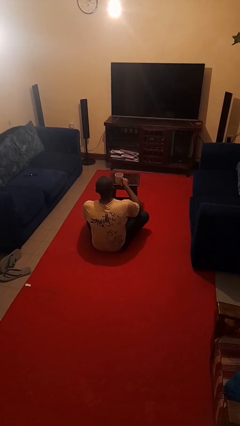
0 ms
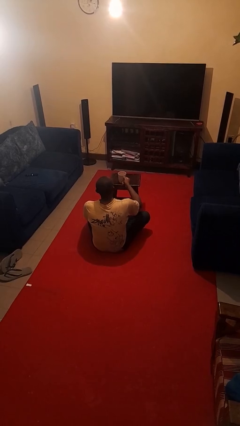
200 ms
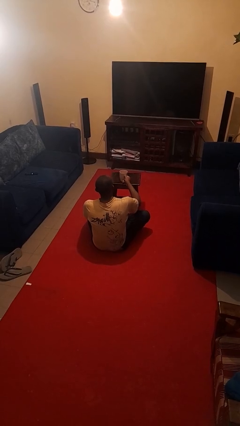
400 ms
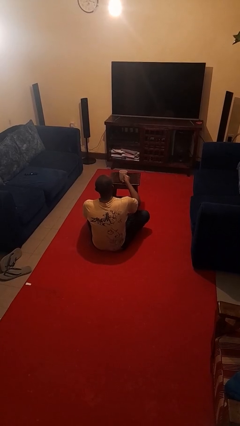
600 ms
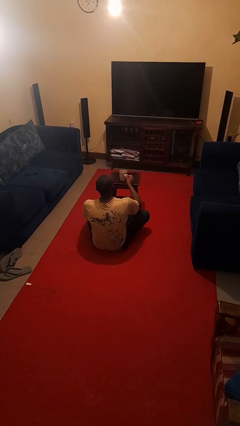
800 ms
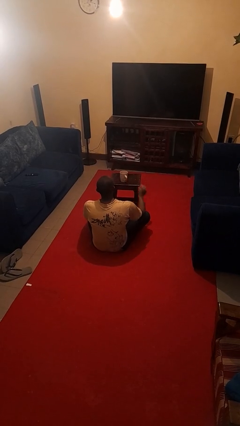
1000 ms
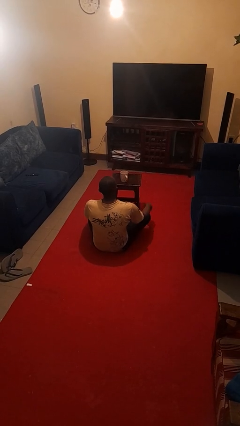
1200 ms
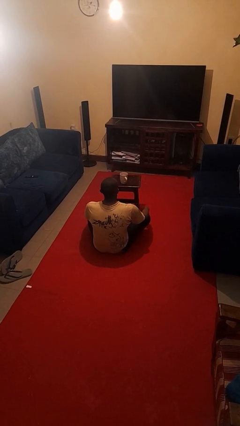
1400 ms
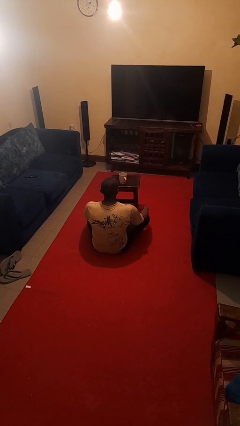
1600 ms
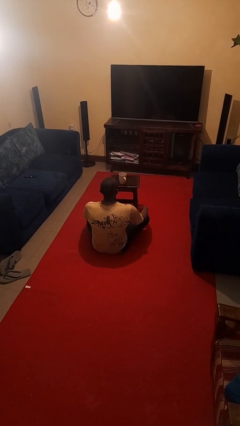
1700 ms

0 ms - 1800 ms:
person puts down object on table

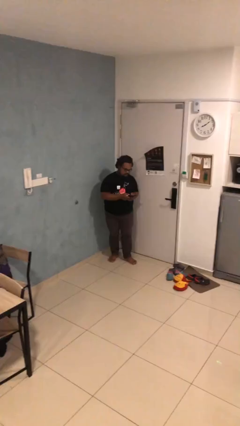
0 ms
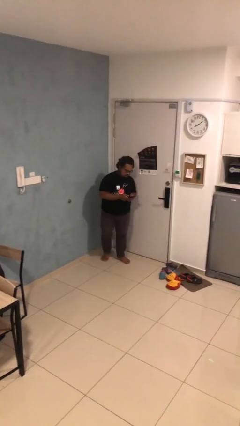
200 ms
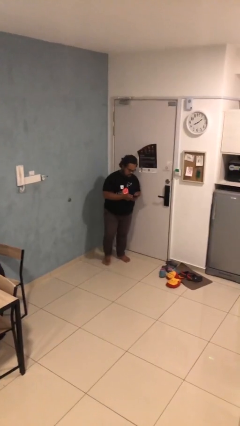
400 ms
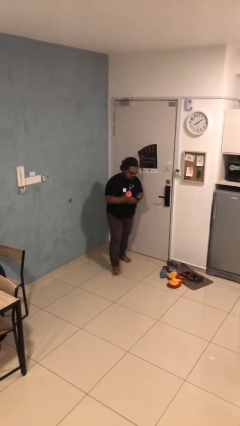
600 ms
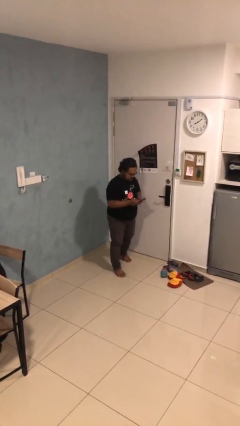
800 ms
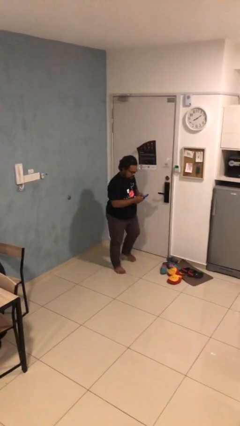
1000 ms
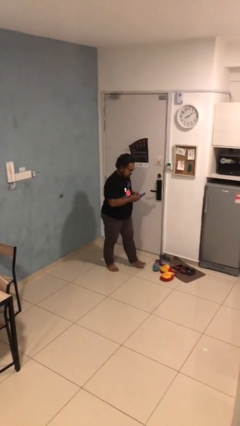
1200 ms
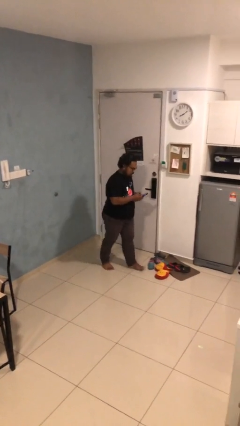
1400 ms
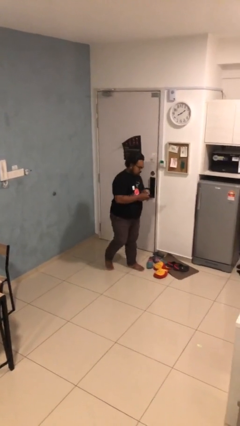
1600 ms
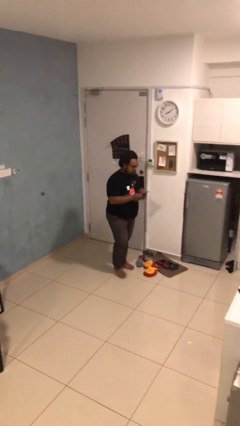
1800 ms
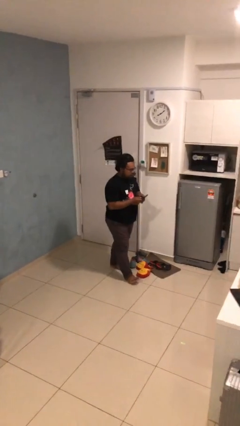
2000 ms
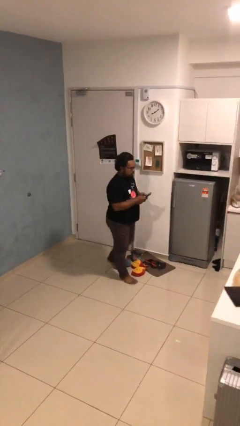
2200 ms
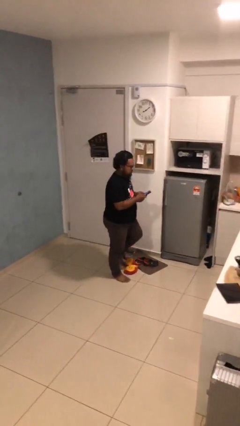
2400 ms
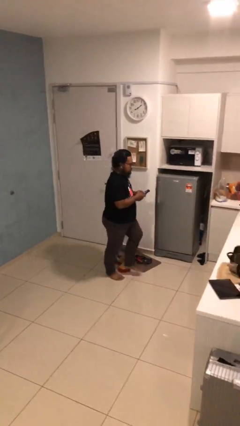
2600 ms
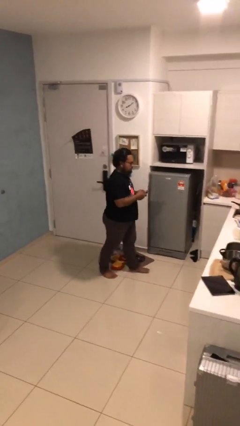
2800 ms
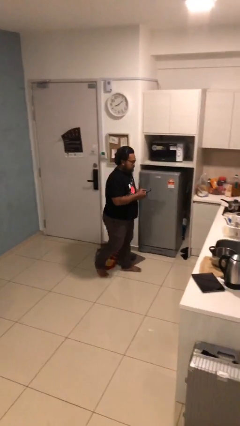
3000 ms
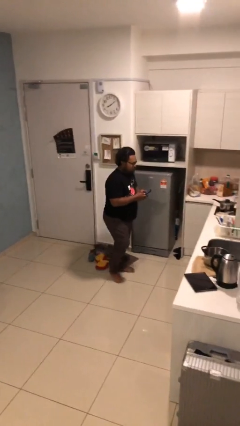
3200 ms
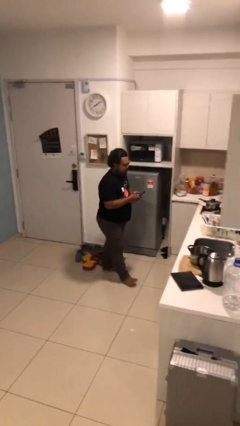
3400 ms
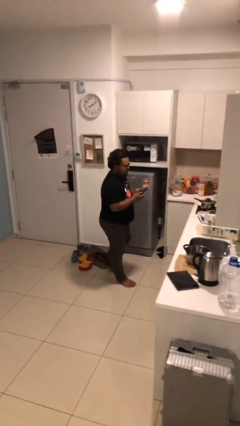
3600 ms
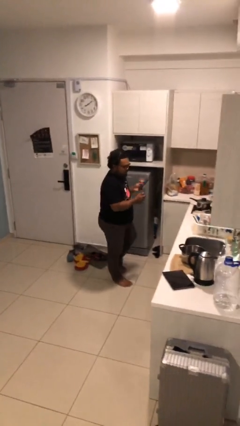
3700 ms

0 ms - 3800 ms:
person texts on phone

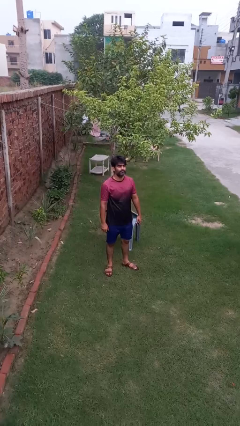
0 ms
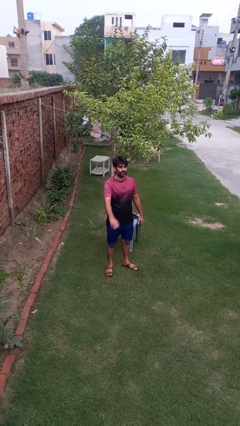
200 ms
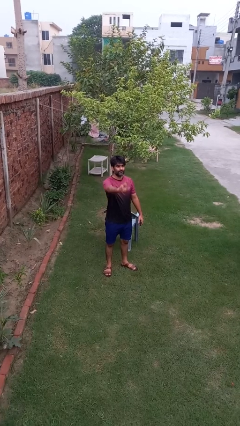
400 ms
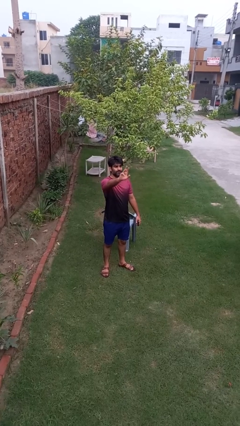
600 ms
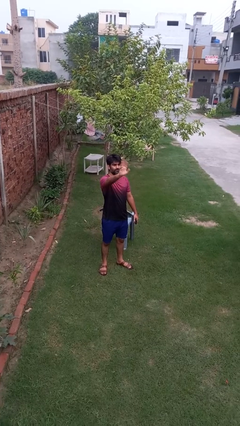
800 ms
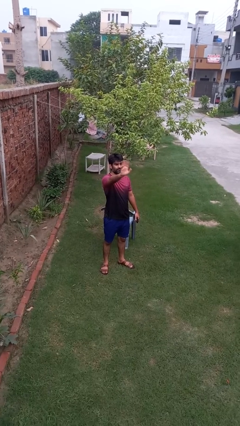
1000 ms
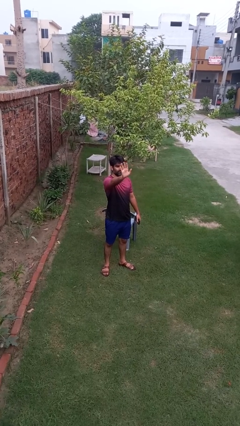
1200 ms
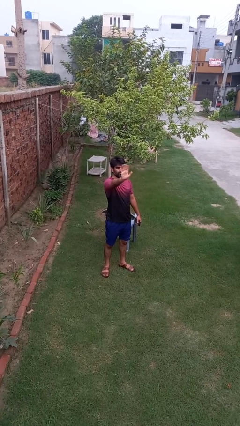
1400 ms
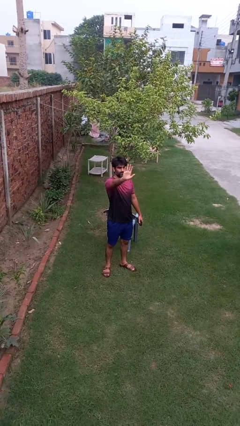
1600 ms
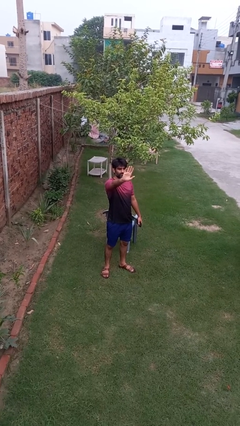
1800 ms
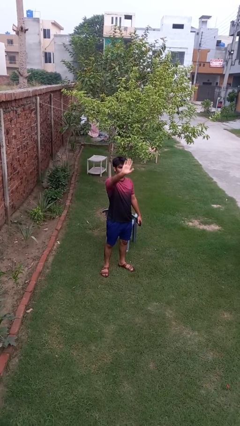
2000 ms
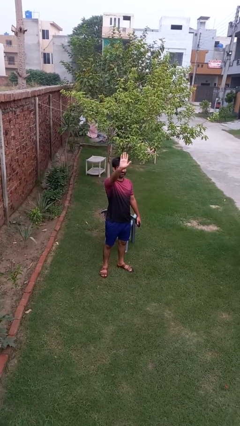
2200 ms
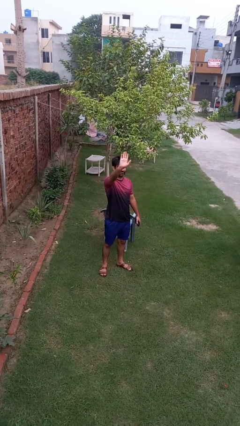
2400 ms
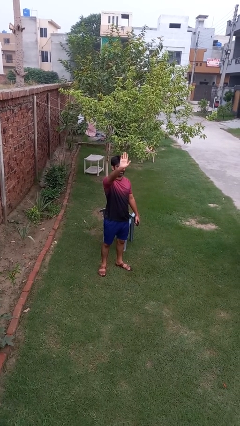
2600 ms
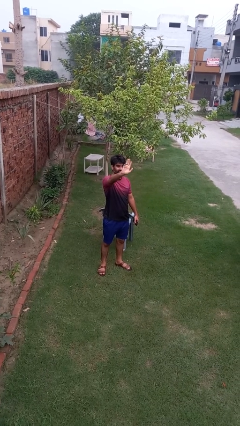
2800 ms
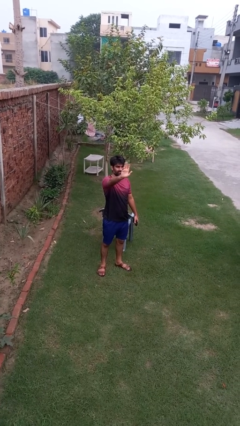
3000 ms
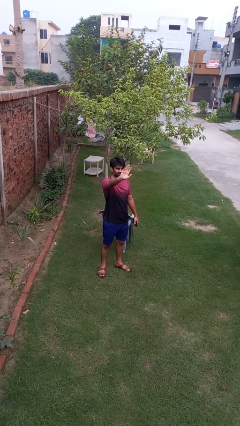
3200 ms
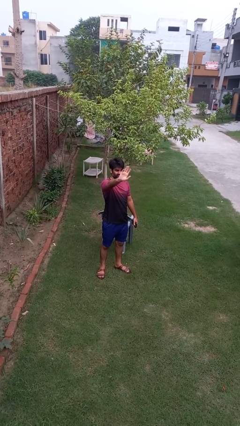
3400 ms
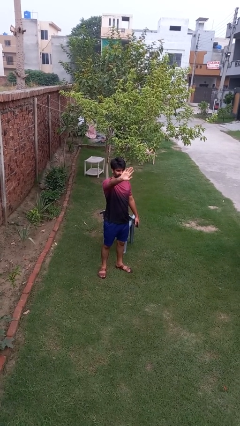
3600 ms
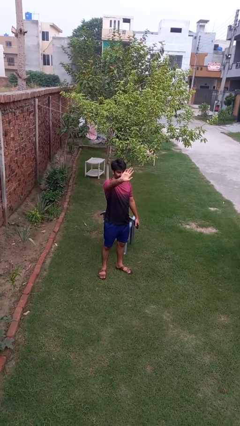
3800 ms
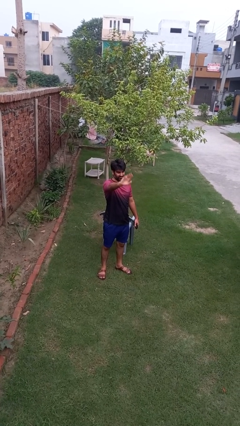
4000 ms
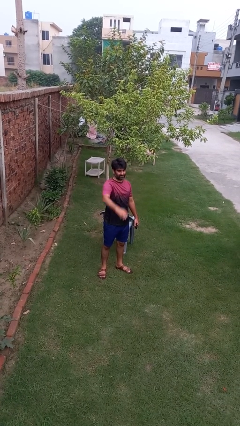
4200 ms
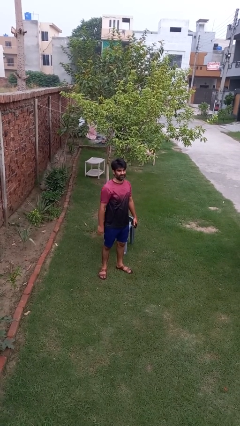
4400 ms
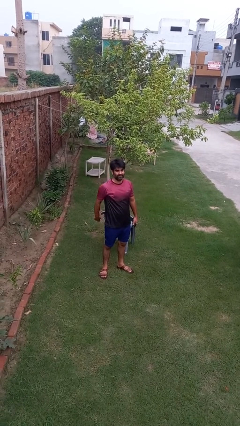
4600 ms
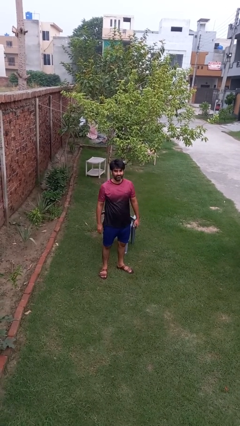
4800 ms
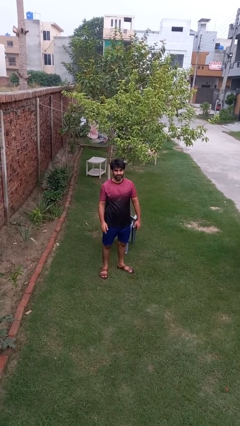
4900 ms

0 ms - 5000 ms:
person waves at person

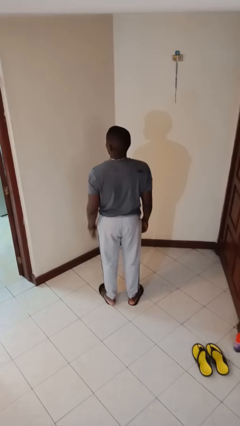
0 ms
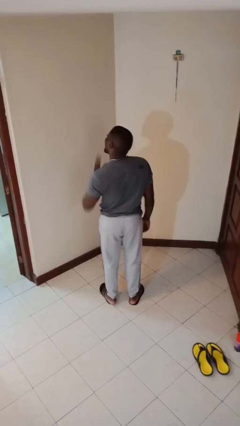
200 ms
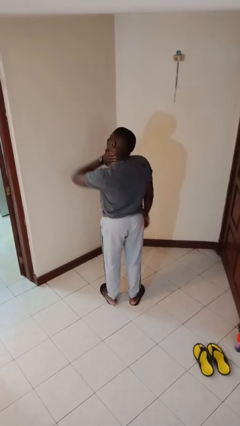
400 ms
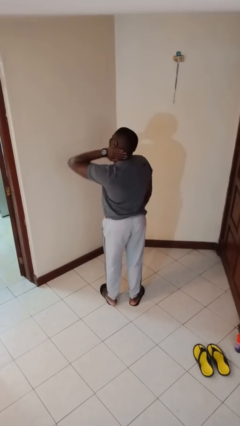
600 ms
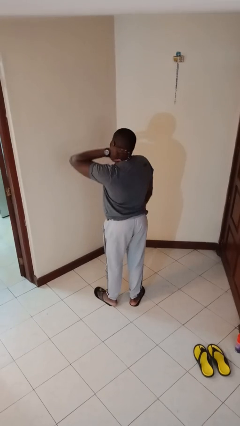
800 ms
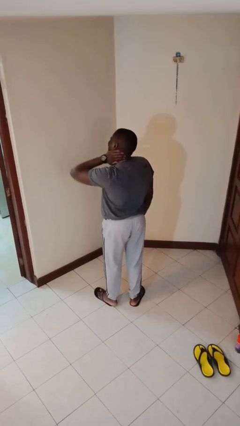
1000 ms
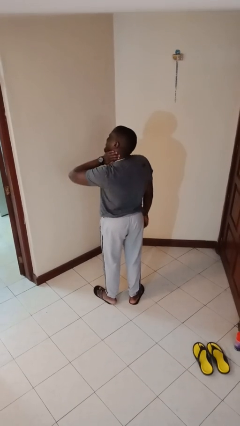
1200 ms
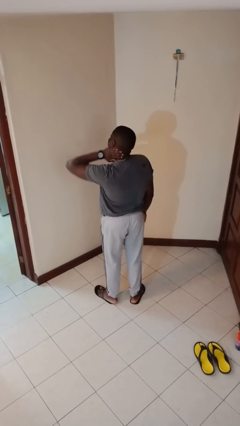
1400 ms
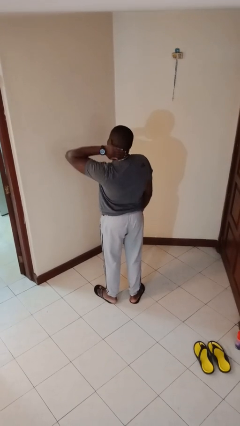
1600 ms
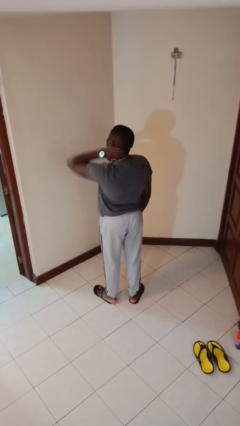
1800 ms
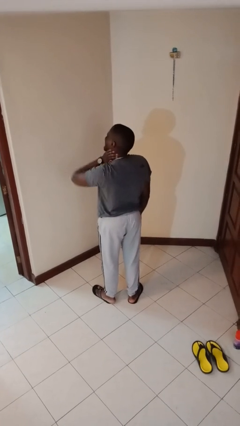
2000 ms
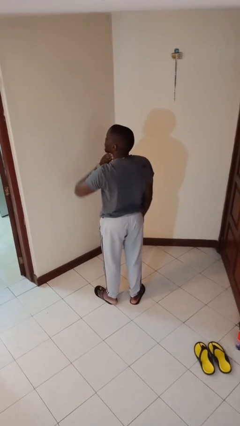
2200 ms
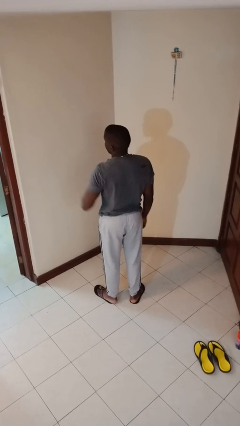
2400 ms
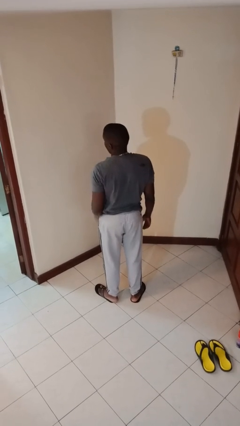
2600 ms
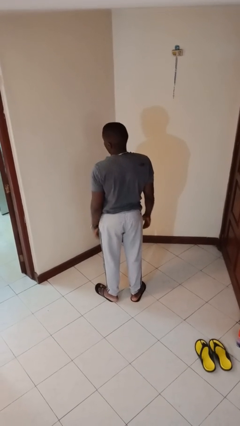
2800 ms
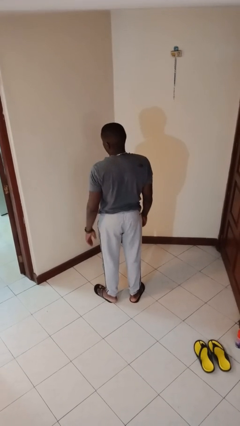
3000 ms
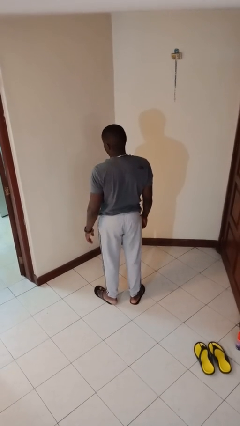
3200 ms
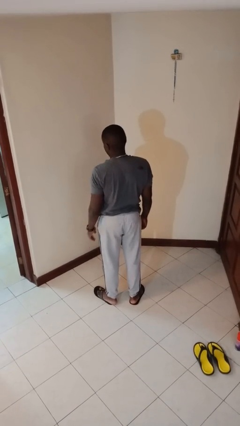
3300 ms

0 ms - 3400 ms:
person rubs neck

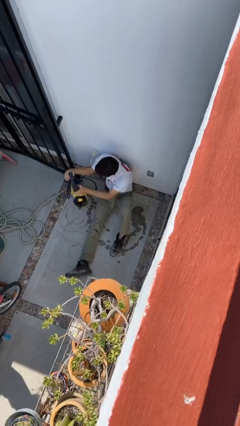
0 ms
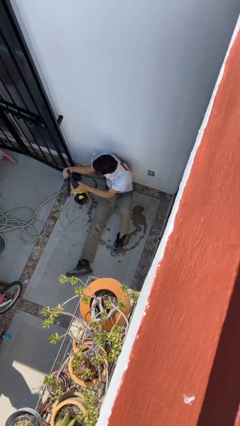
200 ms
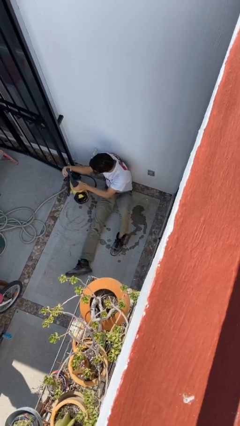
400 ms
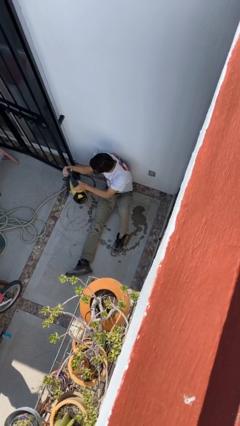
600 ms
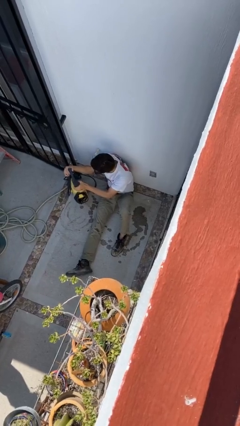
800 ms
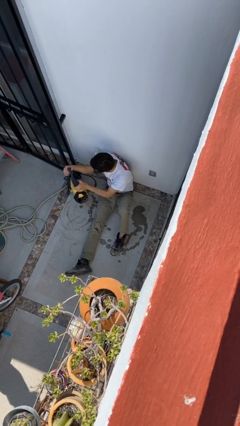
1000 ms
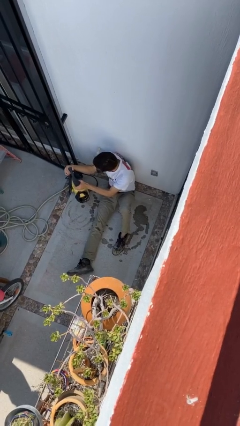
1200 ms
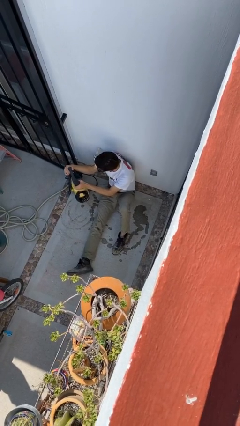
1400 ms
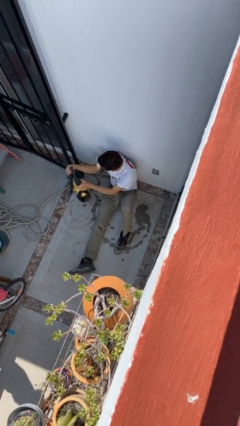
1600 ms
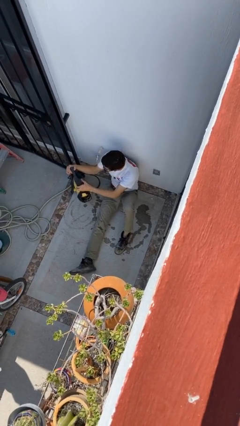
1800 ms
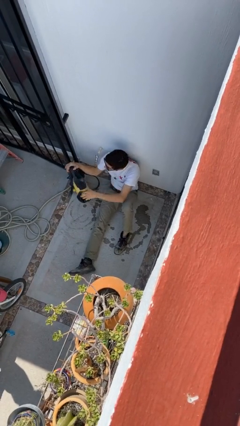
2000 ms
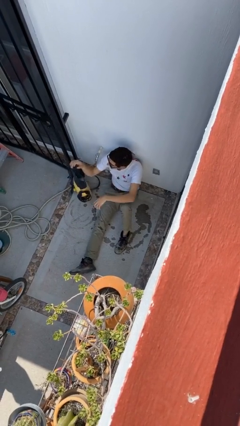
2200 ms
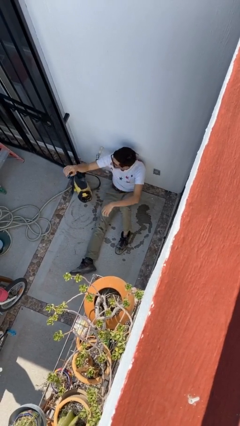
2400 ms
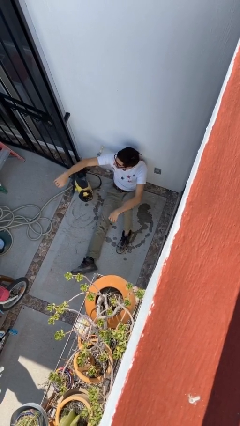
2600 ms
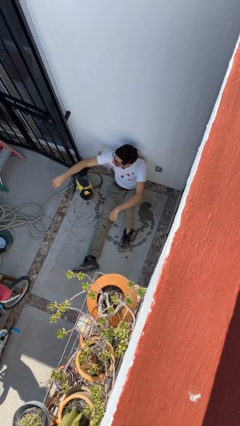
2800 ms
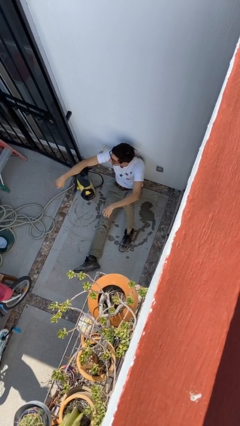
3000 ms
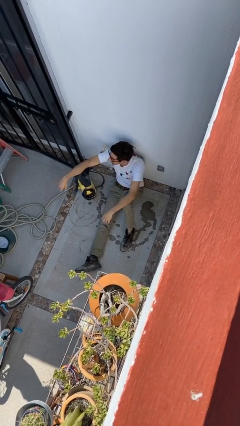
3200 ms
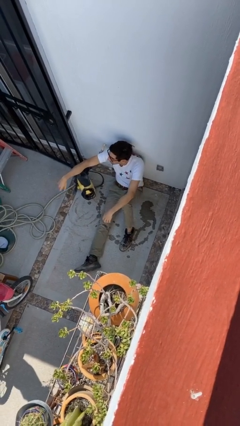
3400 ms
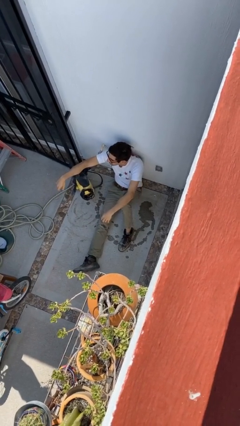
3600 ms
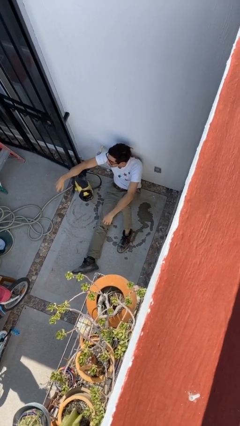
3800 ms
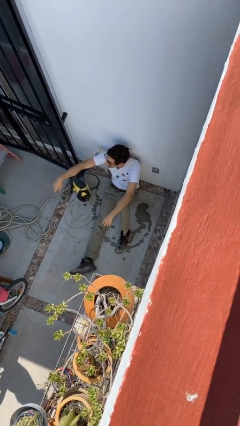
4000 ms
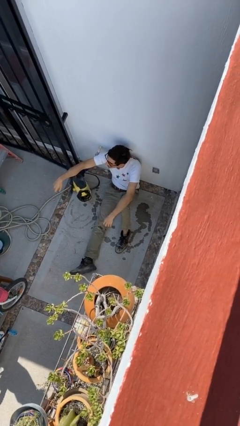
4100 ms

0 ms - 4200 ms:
person puts down object on floor
